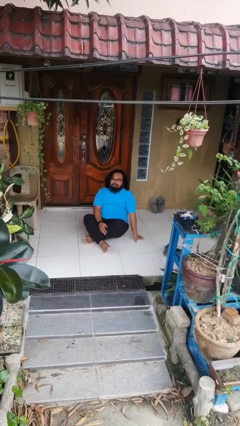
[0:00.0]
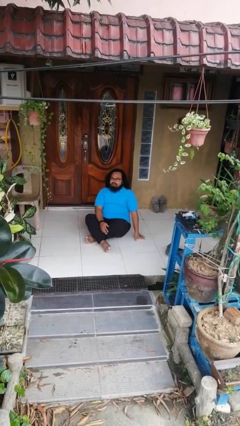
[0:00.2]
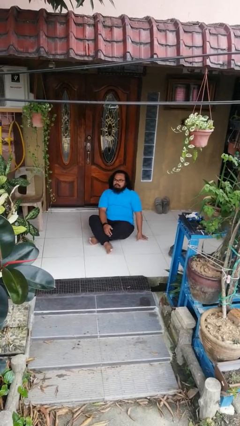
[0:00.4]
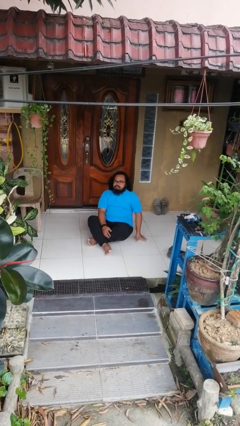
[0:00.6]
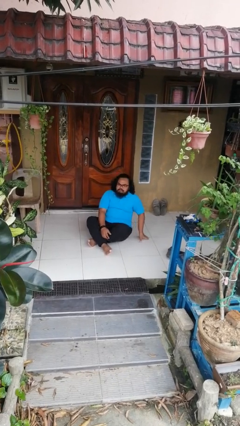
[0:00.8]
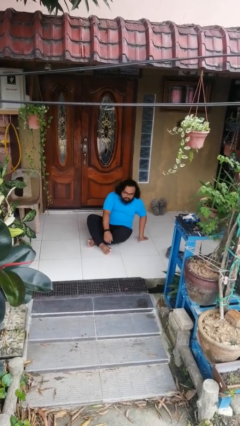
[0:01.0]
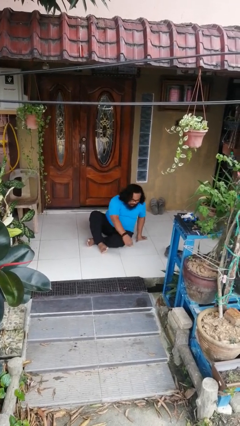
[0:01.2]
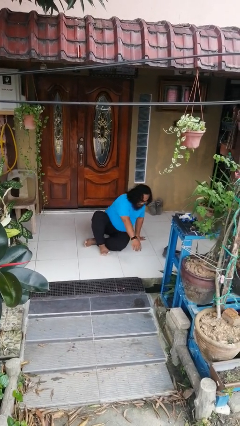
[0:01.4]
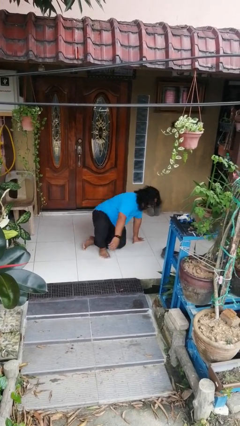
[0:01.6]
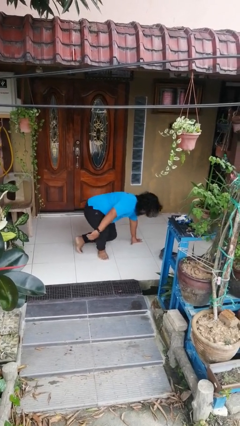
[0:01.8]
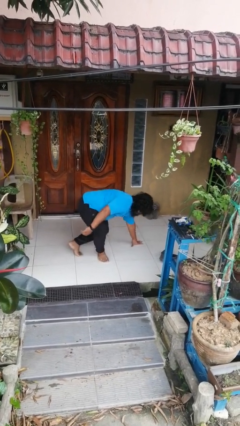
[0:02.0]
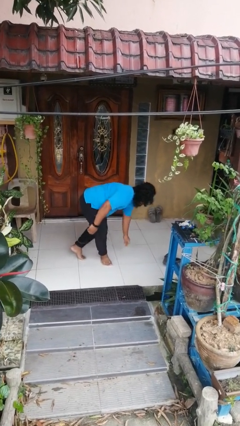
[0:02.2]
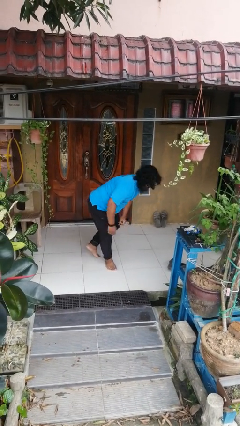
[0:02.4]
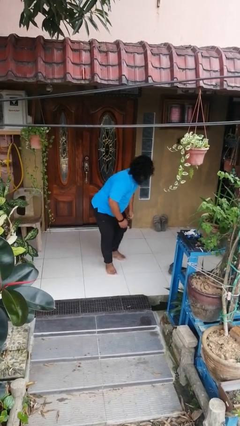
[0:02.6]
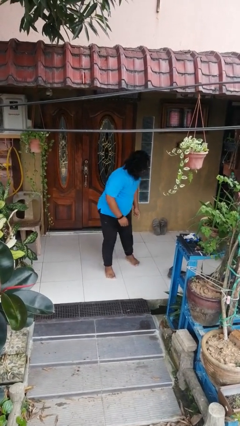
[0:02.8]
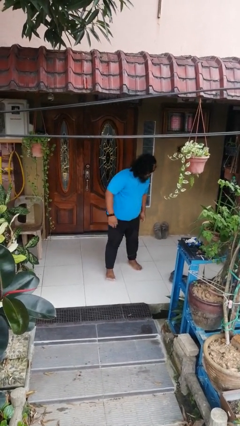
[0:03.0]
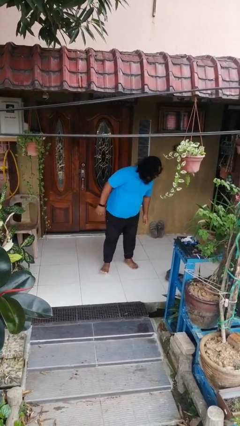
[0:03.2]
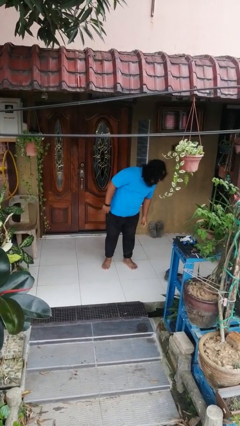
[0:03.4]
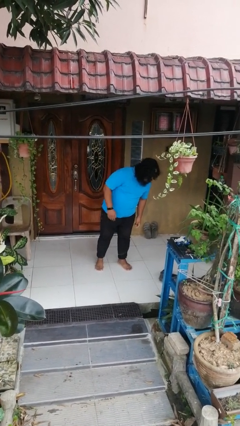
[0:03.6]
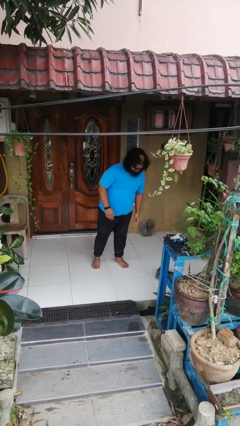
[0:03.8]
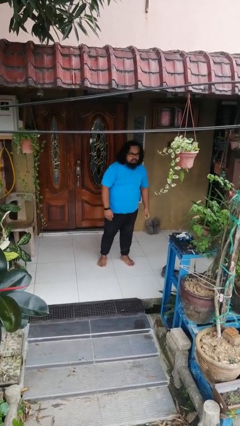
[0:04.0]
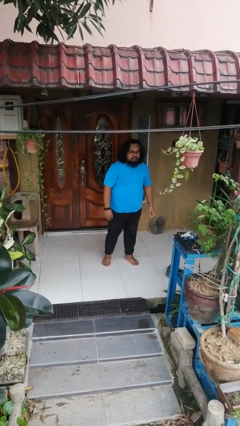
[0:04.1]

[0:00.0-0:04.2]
person stands up from floor

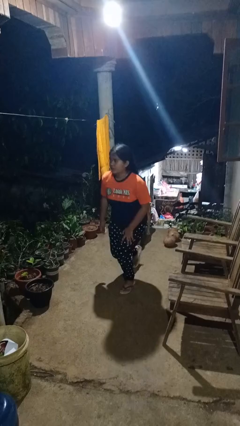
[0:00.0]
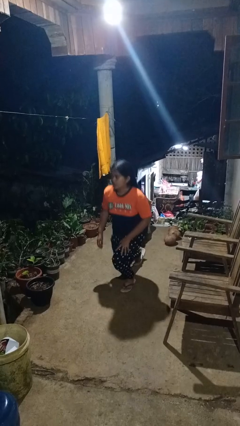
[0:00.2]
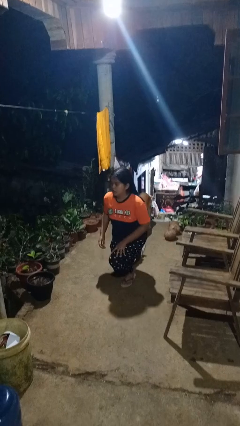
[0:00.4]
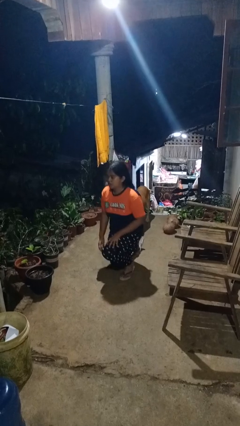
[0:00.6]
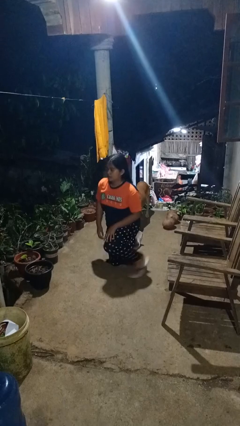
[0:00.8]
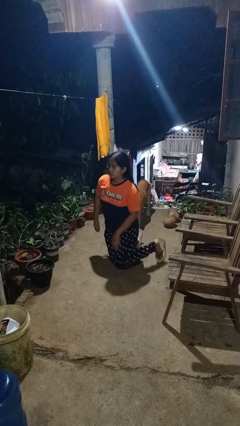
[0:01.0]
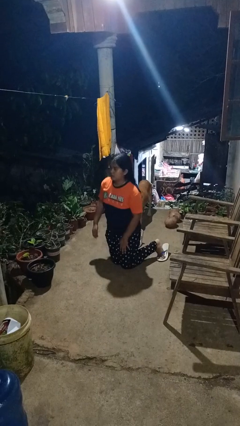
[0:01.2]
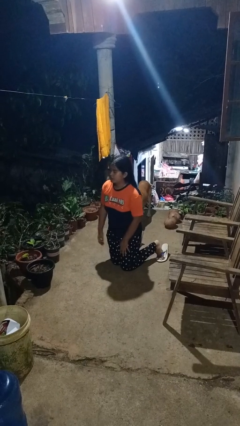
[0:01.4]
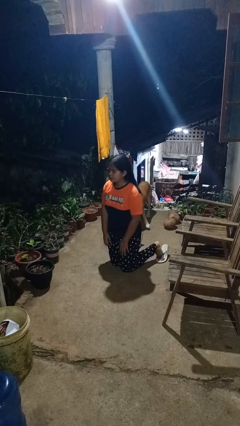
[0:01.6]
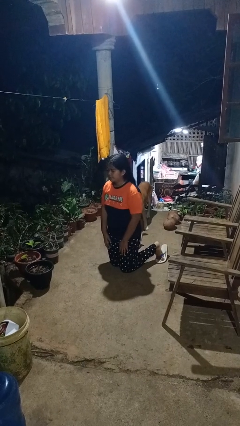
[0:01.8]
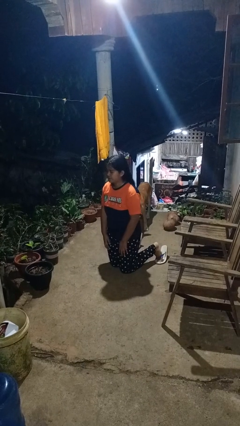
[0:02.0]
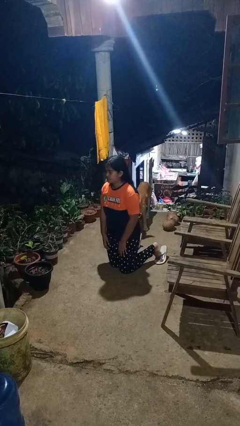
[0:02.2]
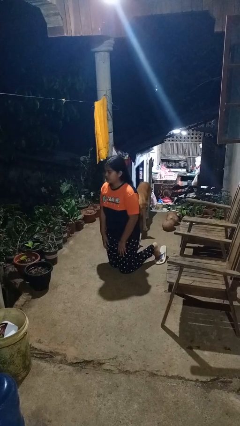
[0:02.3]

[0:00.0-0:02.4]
person kneels

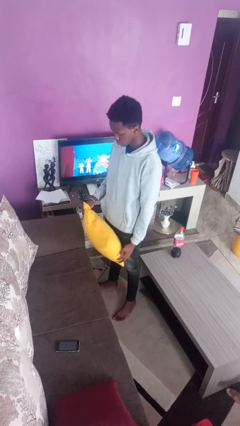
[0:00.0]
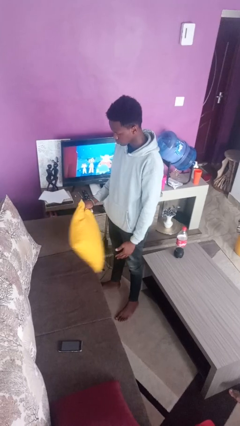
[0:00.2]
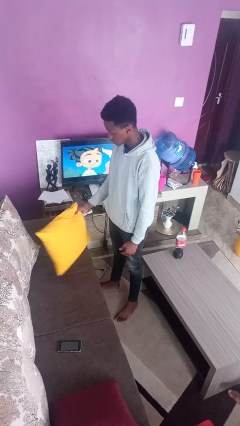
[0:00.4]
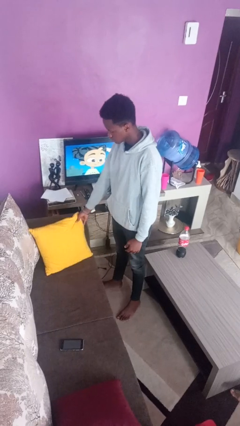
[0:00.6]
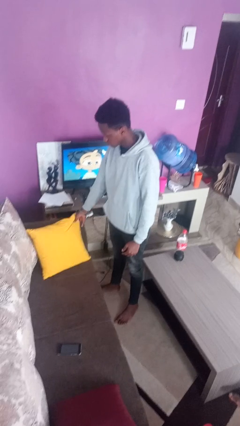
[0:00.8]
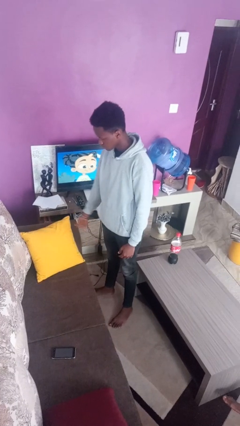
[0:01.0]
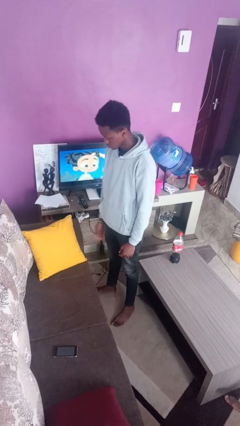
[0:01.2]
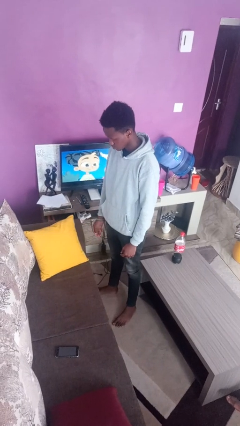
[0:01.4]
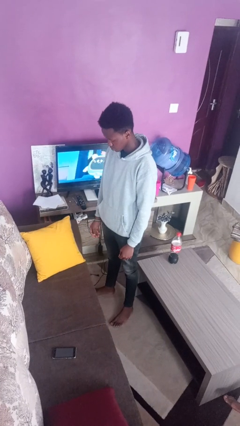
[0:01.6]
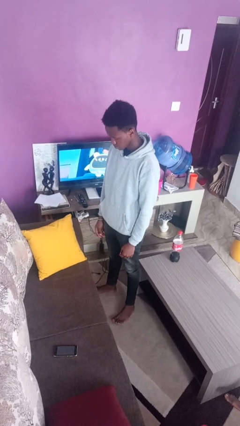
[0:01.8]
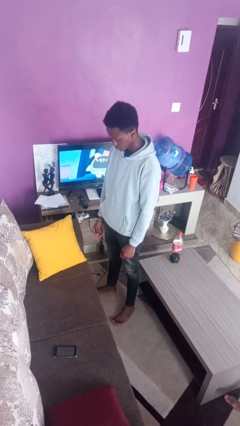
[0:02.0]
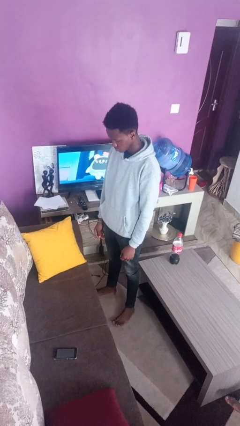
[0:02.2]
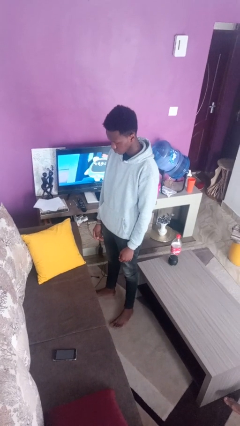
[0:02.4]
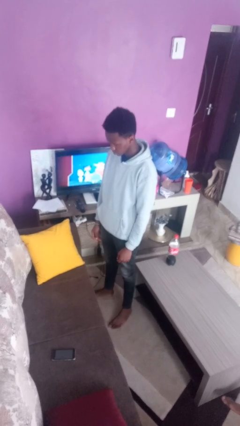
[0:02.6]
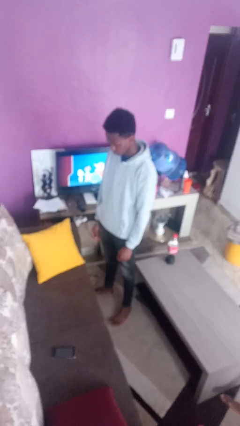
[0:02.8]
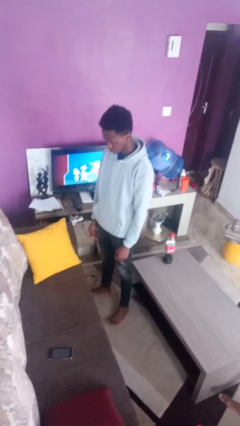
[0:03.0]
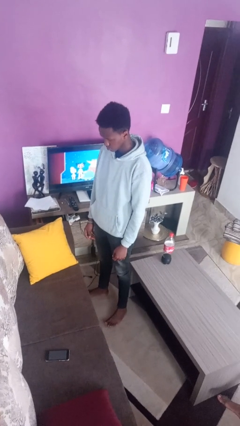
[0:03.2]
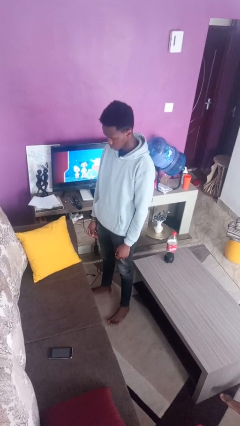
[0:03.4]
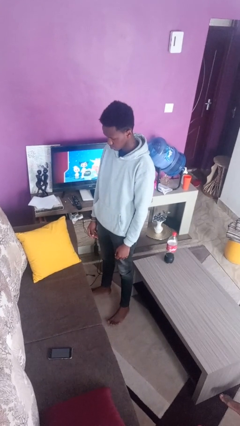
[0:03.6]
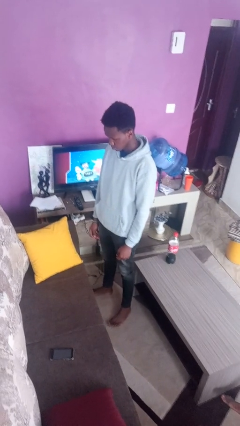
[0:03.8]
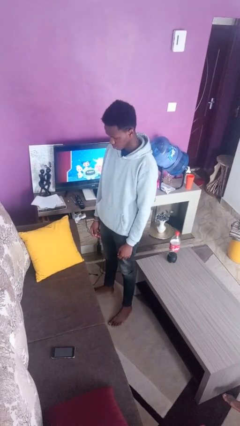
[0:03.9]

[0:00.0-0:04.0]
person puts down object on couch

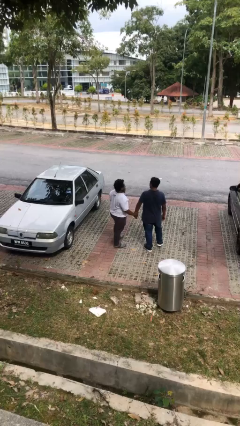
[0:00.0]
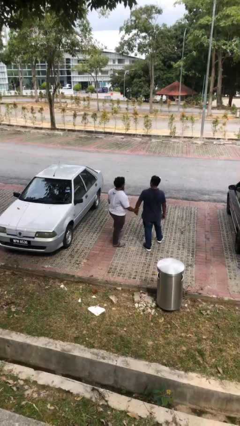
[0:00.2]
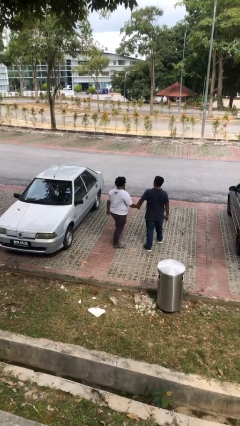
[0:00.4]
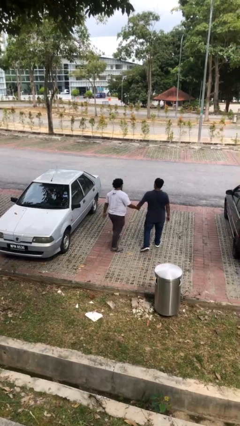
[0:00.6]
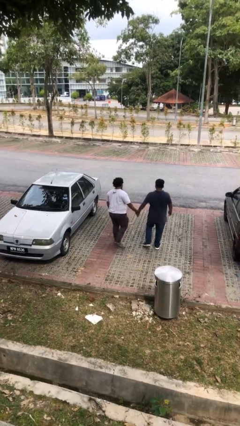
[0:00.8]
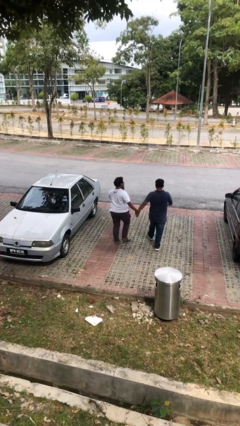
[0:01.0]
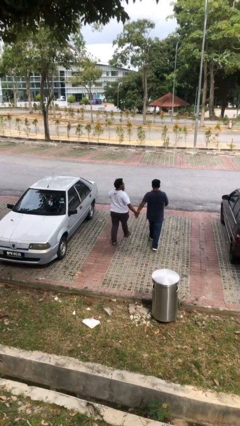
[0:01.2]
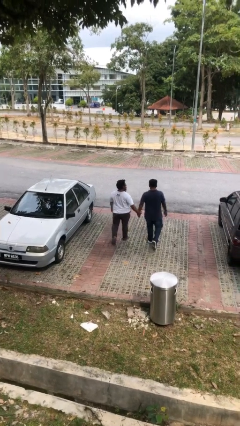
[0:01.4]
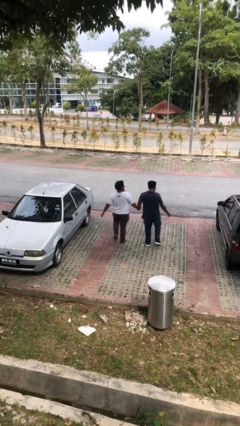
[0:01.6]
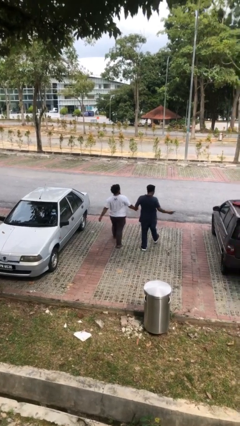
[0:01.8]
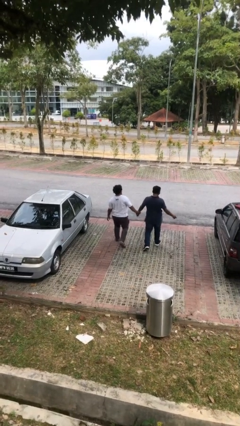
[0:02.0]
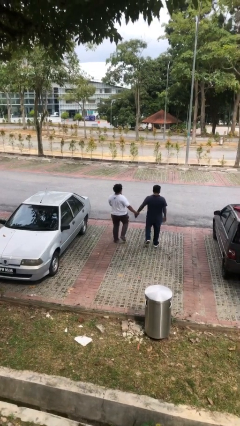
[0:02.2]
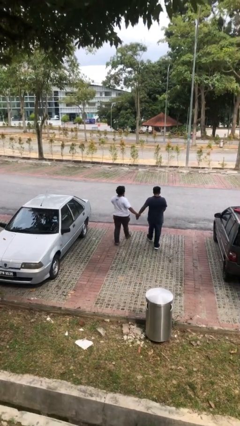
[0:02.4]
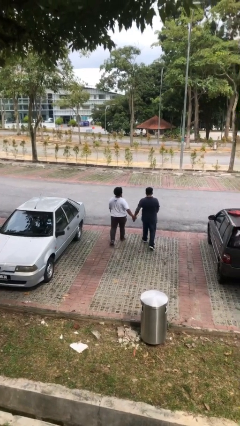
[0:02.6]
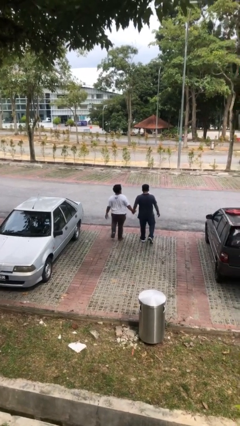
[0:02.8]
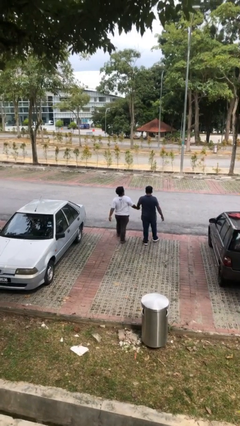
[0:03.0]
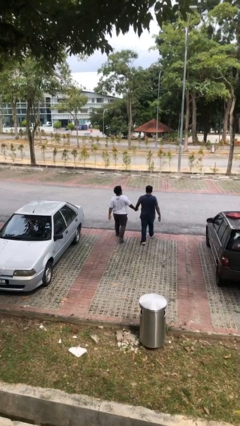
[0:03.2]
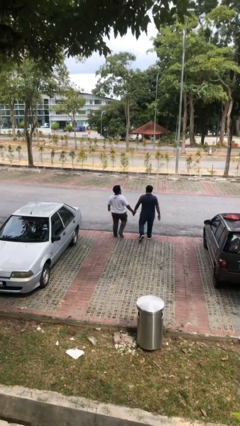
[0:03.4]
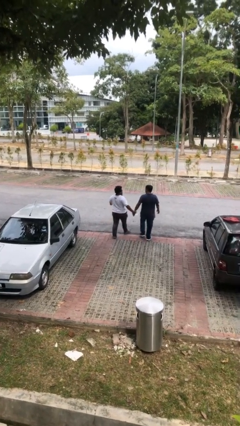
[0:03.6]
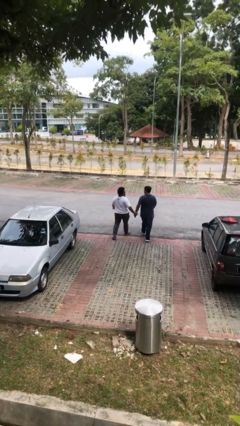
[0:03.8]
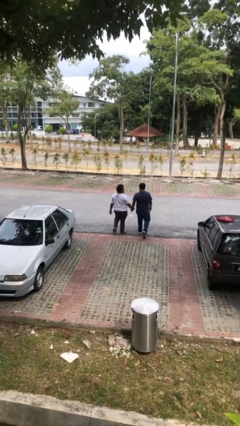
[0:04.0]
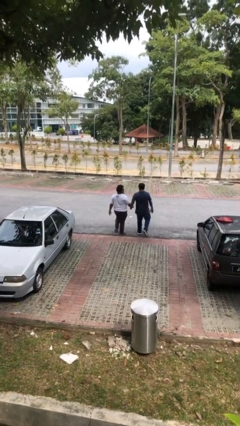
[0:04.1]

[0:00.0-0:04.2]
person holds hand

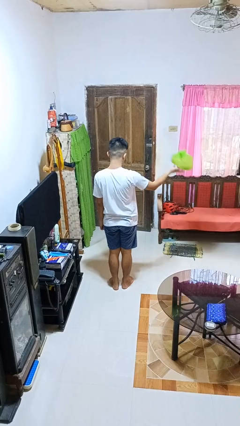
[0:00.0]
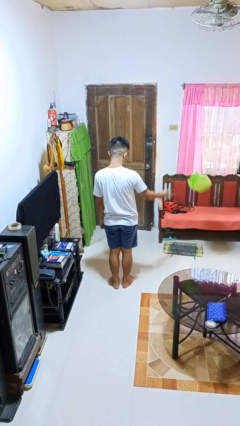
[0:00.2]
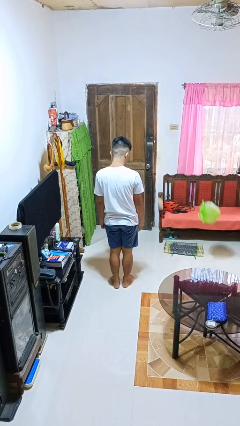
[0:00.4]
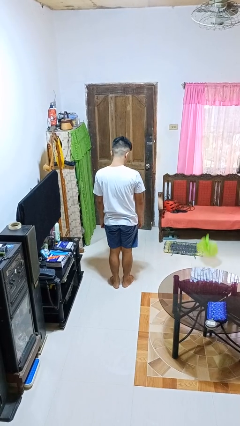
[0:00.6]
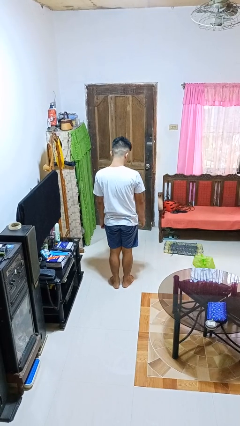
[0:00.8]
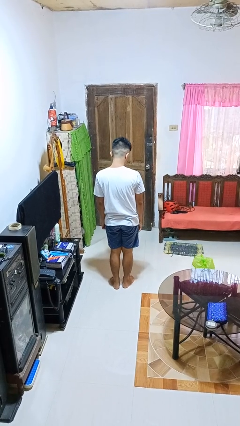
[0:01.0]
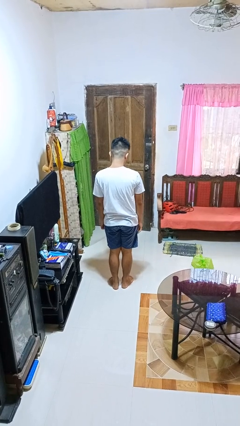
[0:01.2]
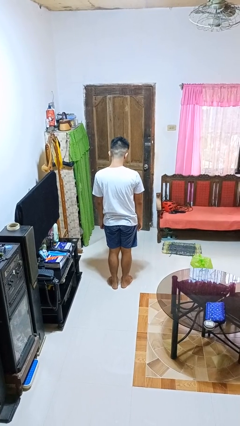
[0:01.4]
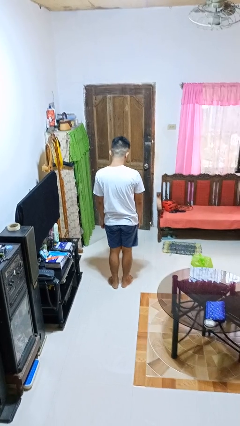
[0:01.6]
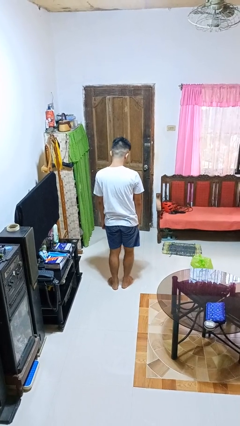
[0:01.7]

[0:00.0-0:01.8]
person throws object to ground

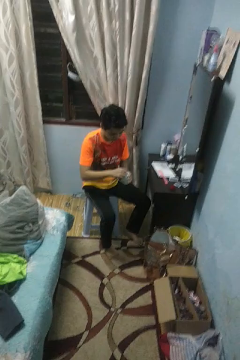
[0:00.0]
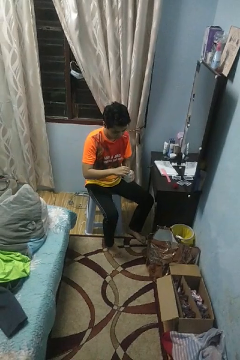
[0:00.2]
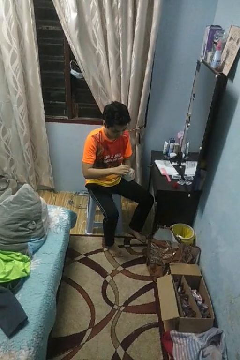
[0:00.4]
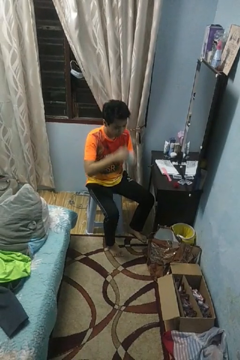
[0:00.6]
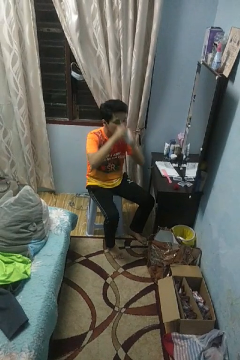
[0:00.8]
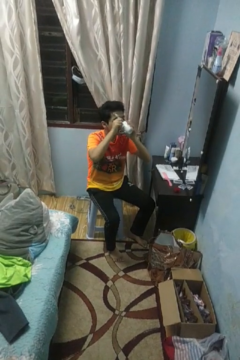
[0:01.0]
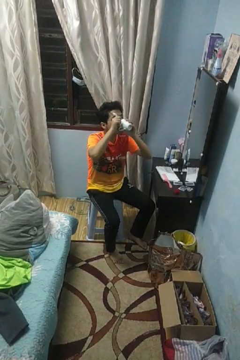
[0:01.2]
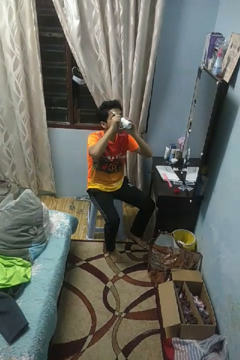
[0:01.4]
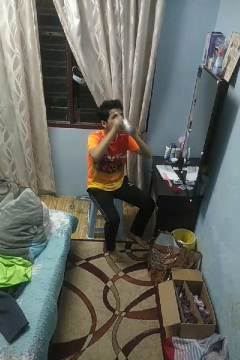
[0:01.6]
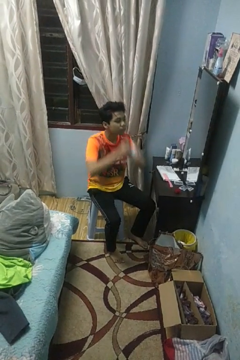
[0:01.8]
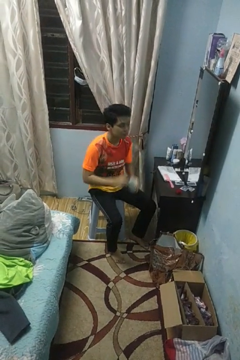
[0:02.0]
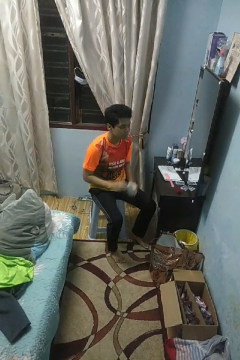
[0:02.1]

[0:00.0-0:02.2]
person drinks from mug
